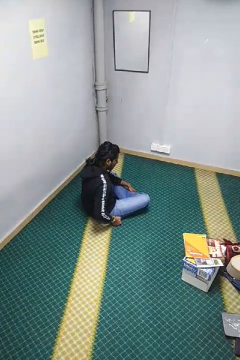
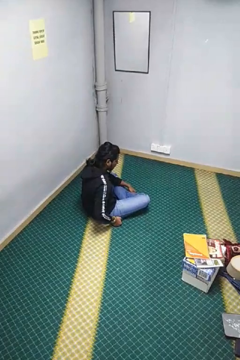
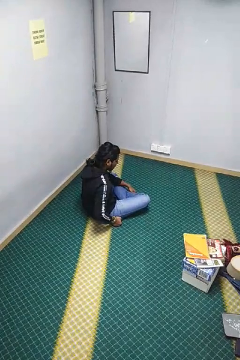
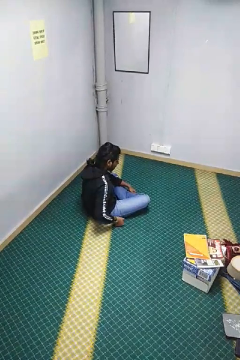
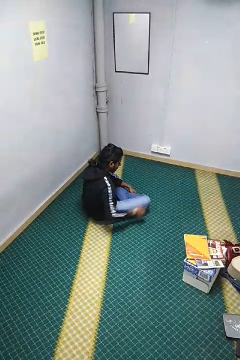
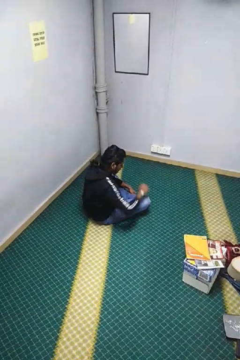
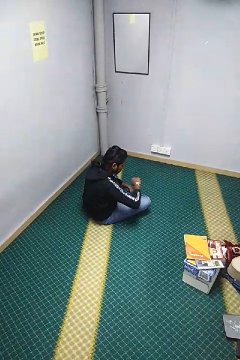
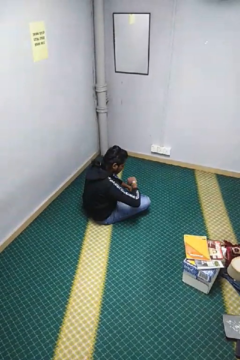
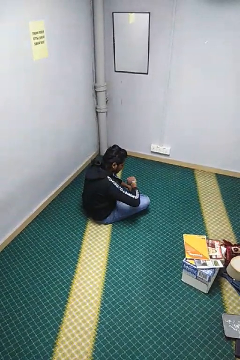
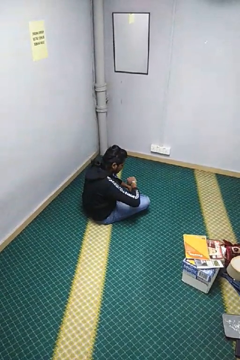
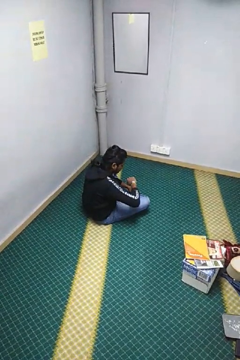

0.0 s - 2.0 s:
person looks at wristwatch

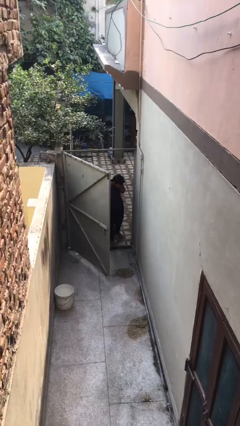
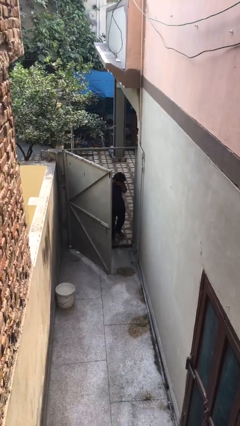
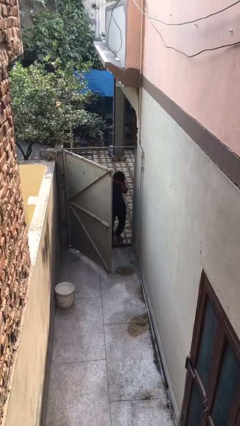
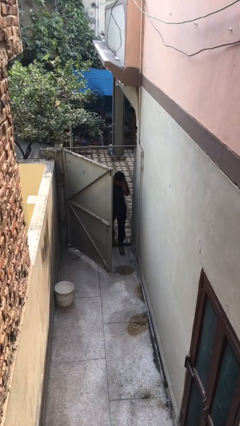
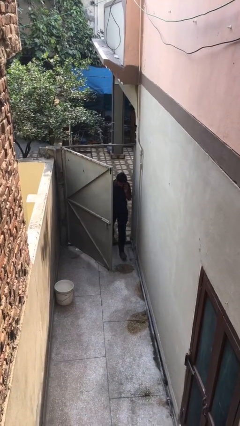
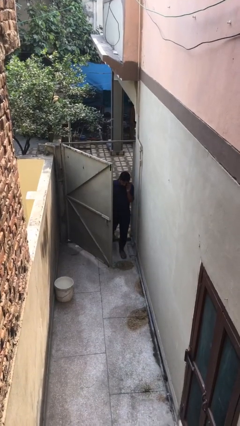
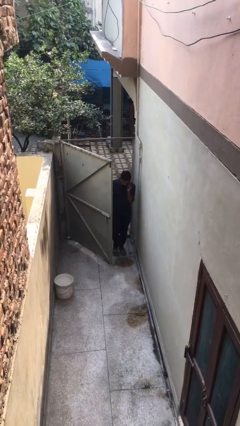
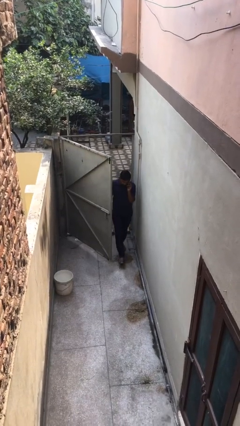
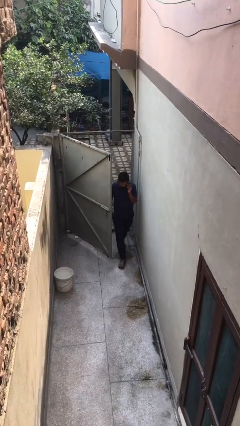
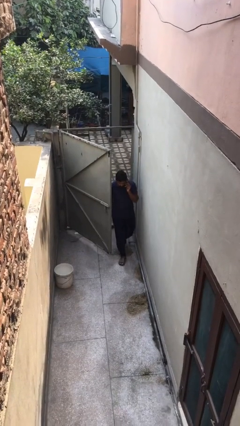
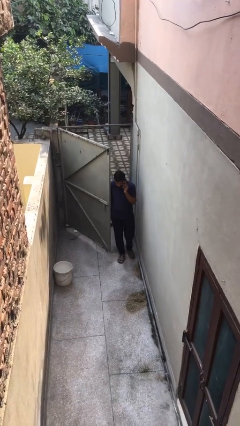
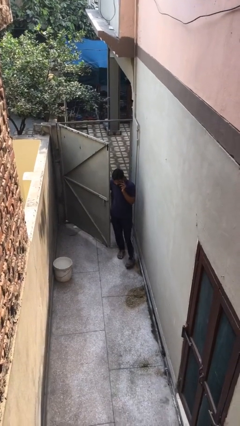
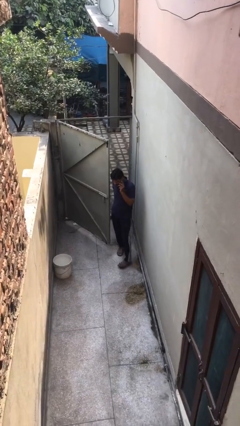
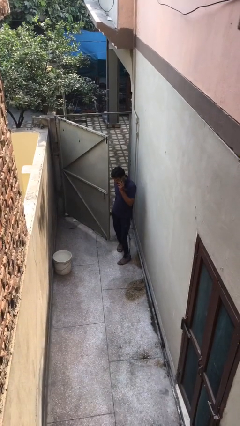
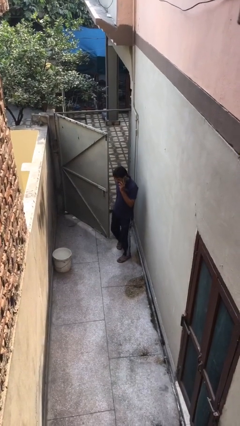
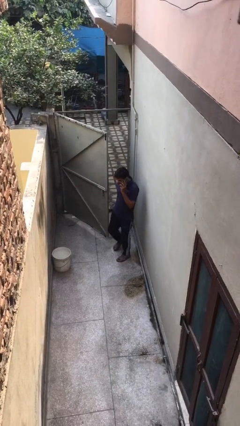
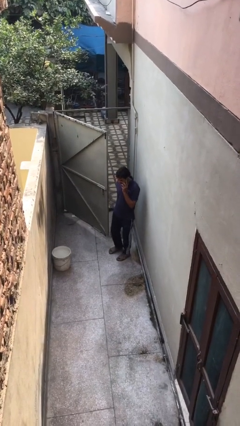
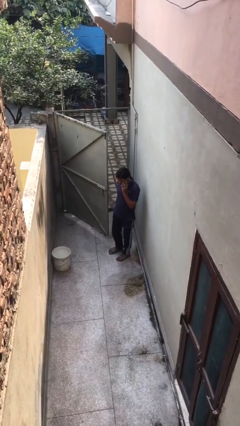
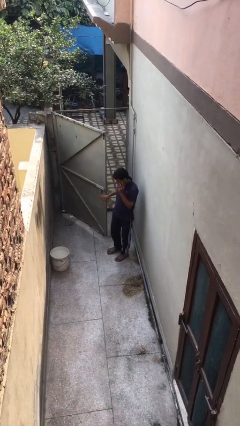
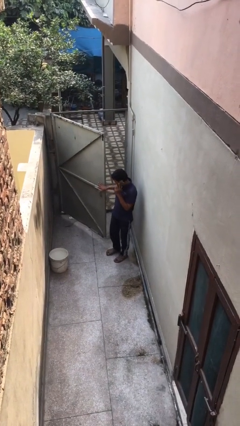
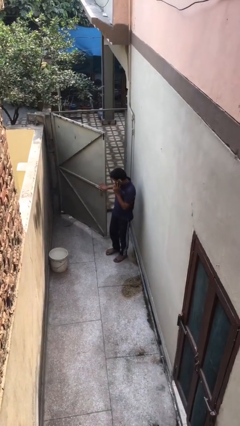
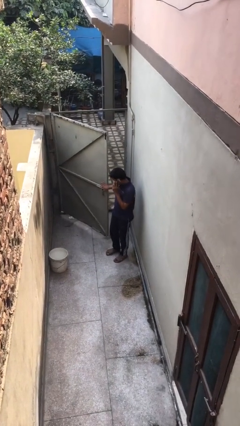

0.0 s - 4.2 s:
person enters scene through structure

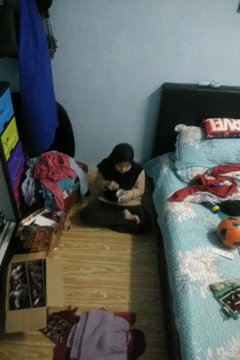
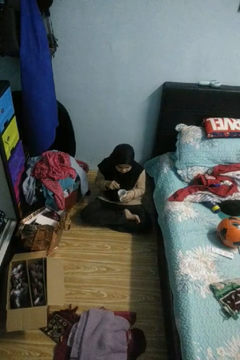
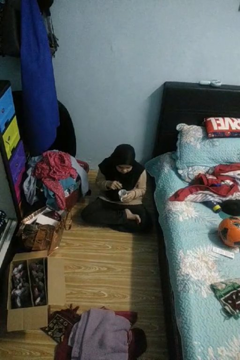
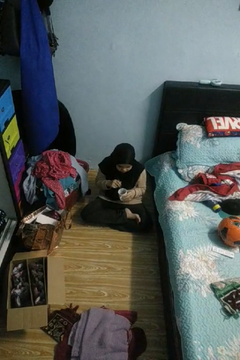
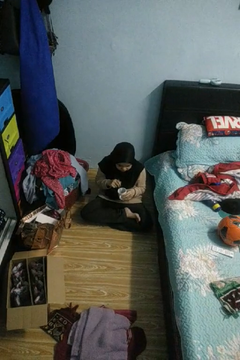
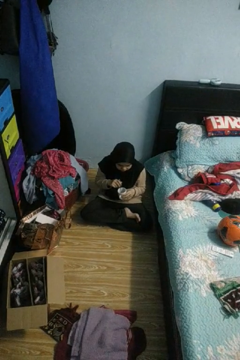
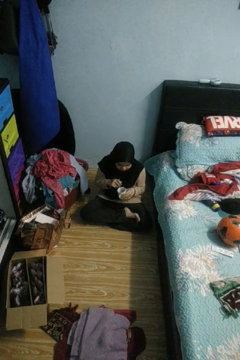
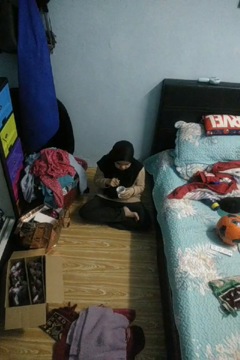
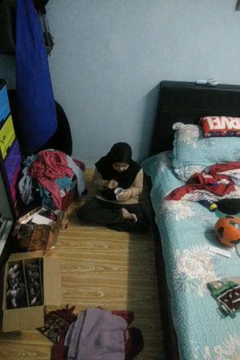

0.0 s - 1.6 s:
person stirs mug

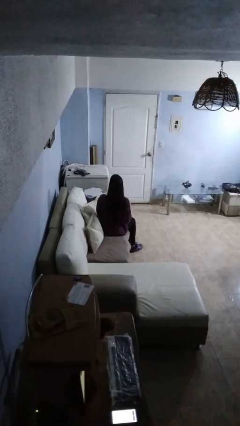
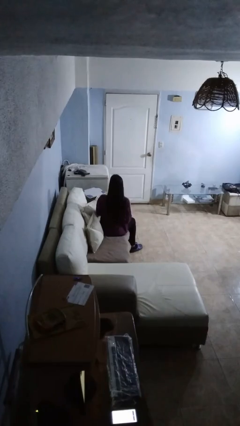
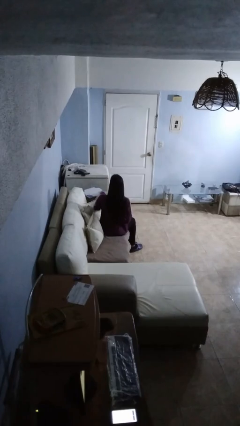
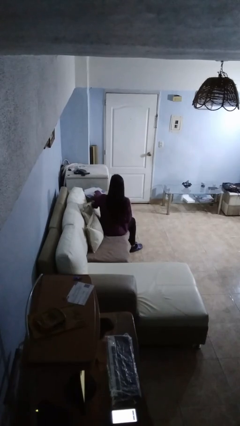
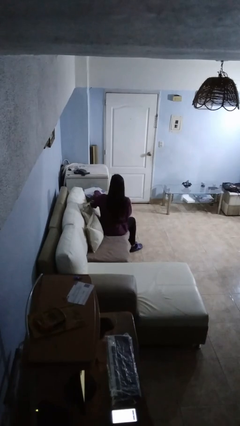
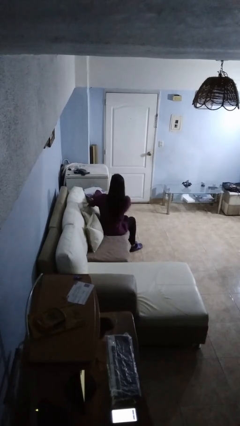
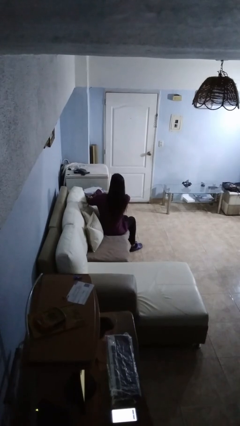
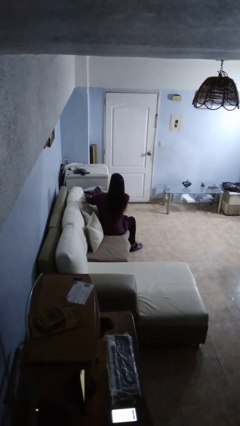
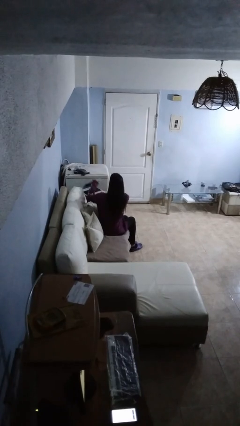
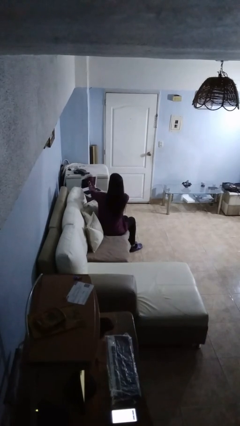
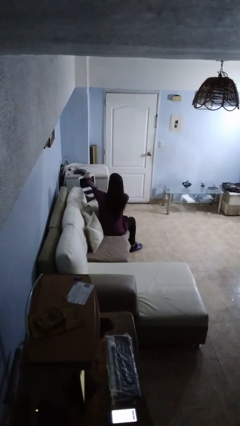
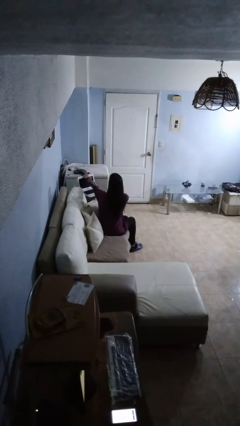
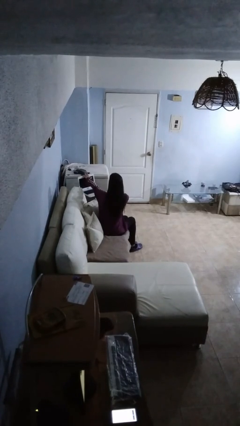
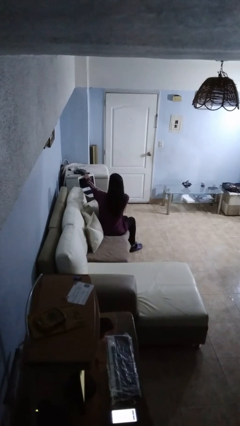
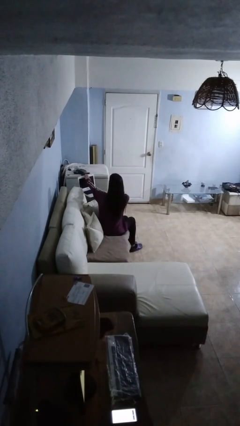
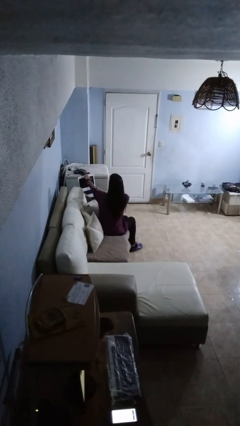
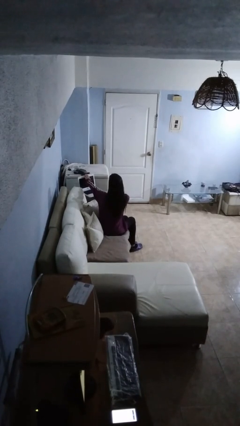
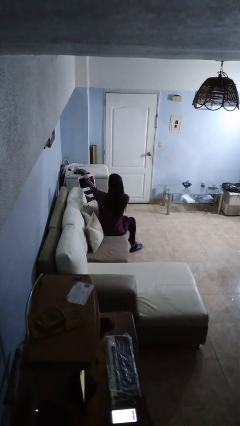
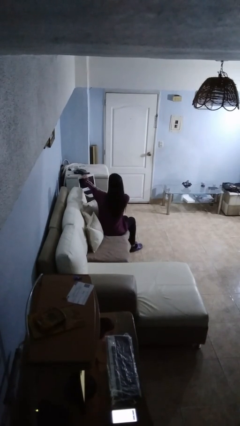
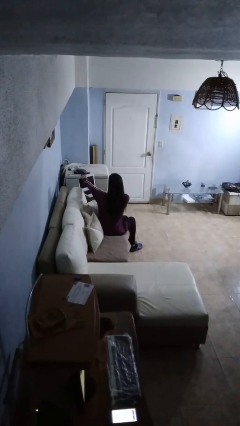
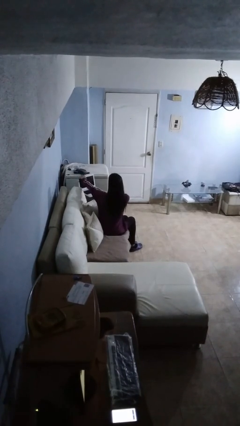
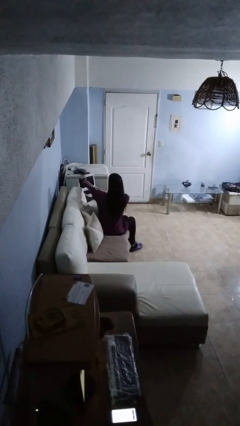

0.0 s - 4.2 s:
person opens laptop

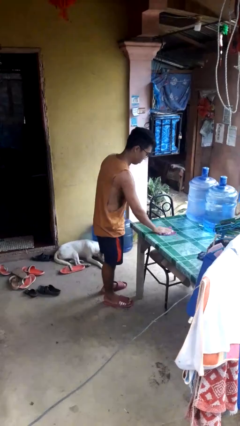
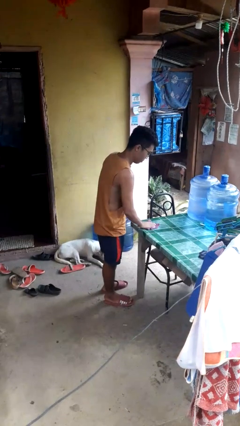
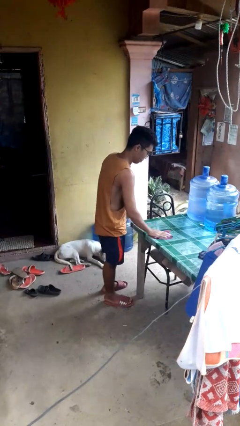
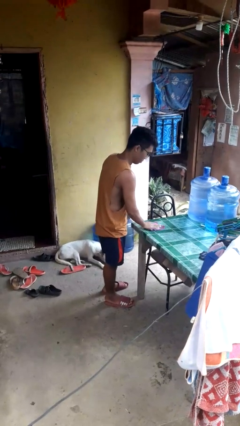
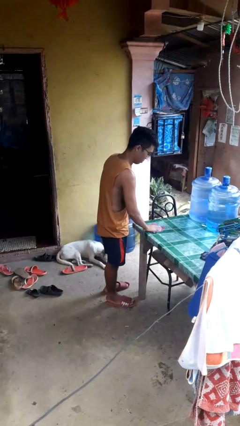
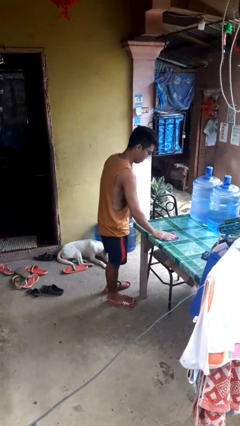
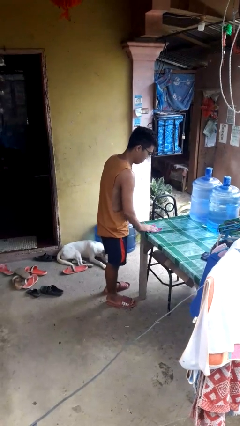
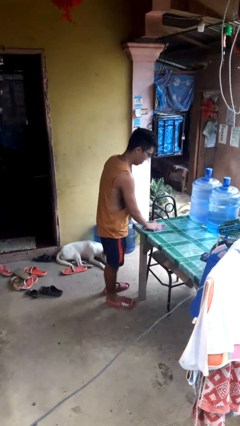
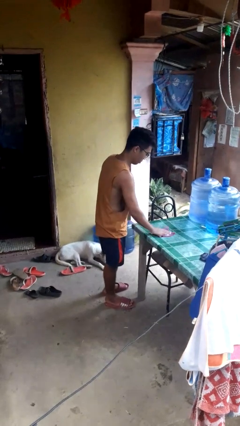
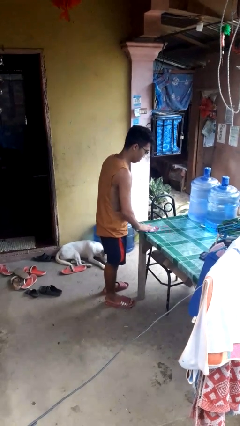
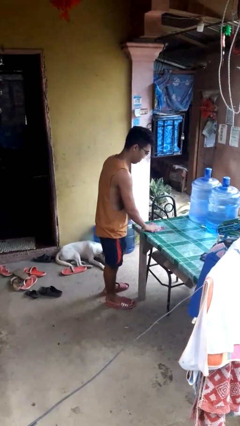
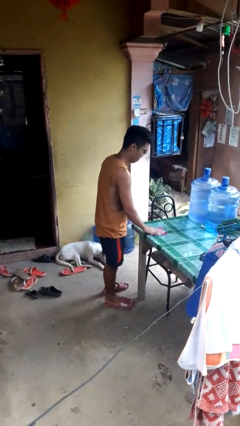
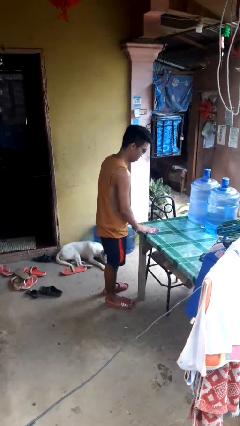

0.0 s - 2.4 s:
person cleans table with rag

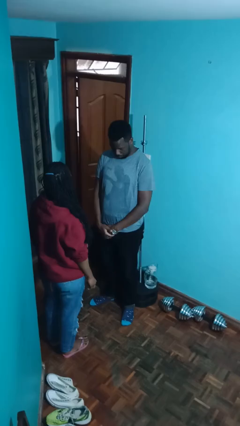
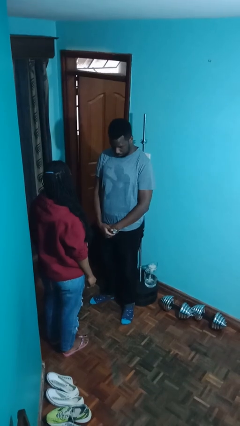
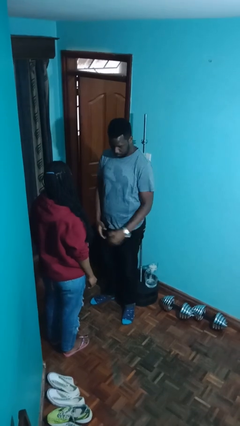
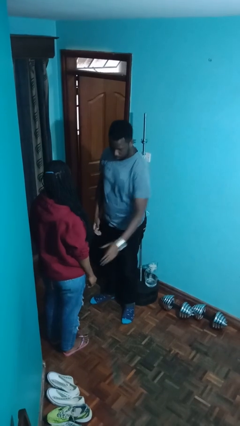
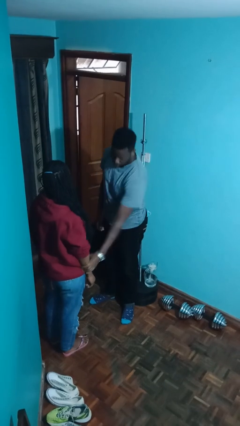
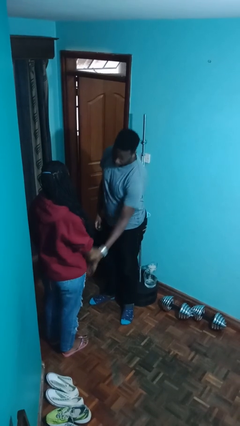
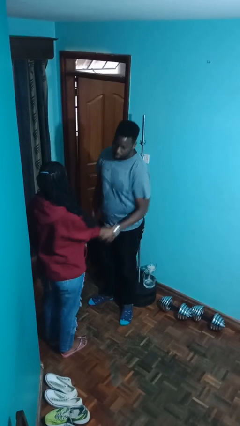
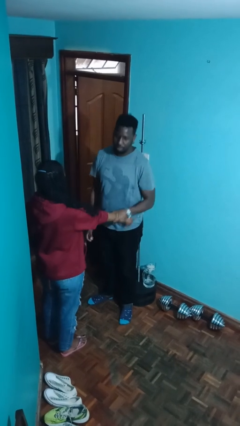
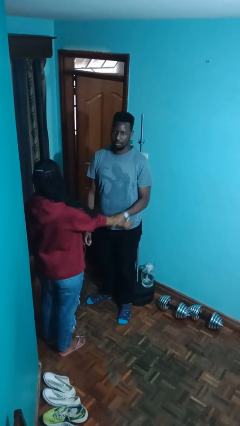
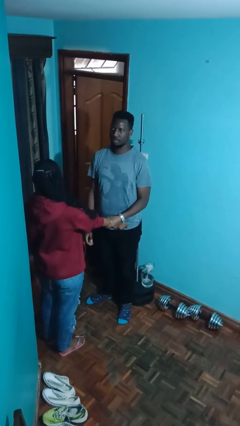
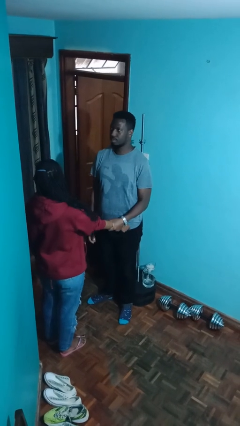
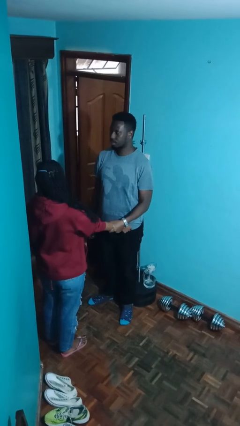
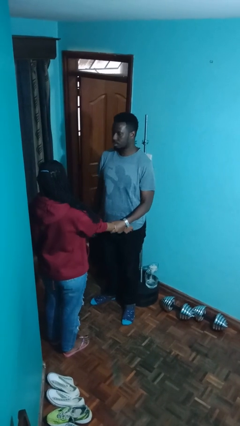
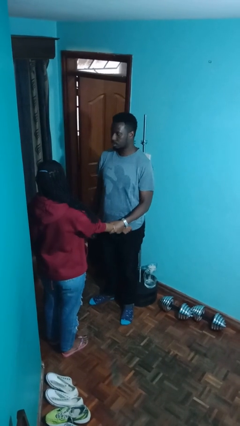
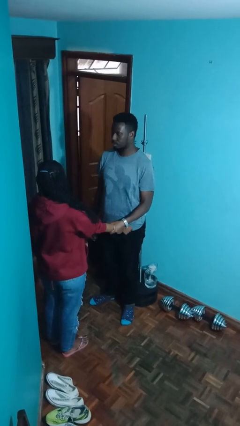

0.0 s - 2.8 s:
person grabs person by forearm

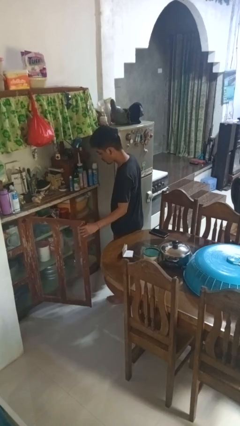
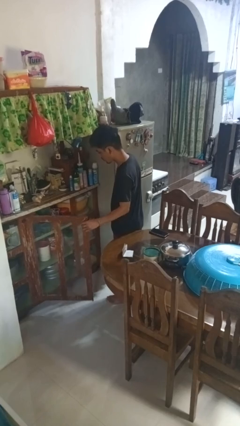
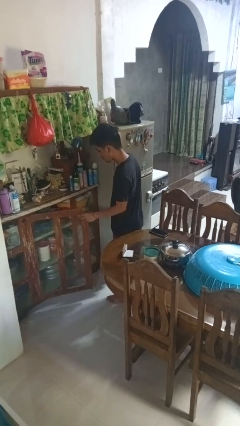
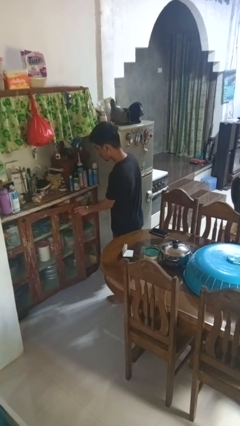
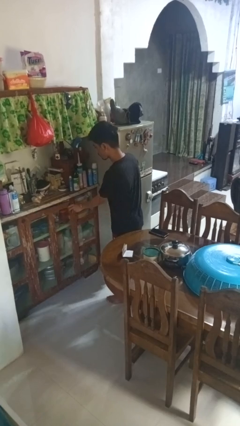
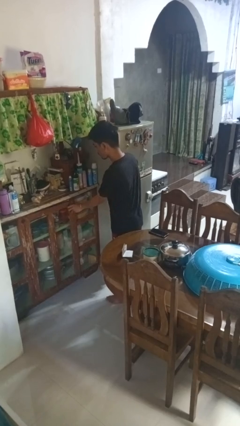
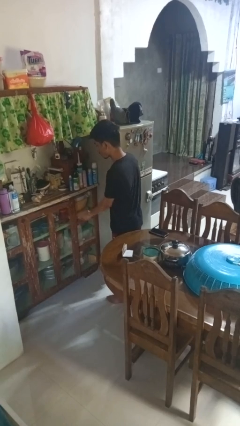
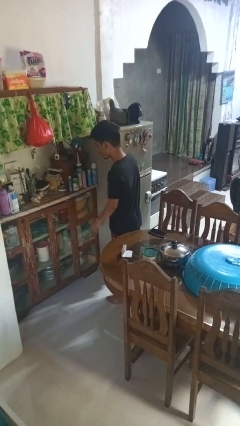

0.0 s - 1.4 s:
person closes cabinet
